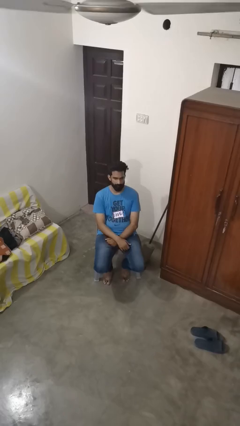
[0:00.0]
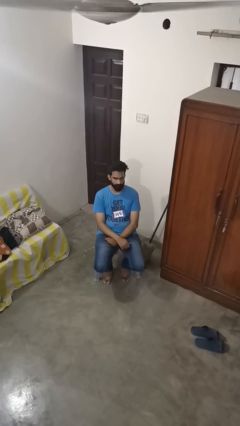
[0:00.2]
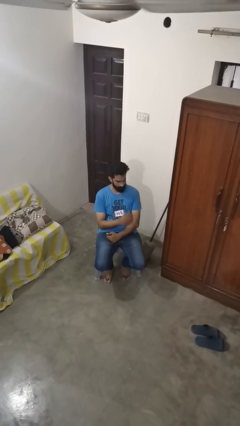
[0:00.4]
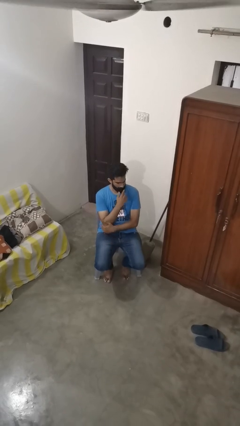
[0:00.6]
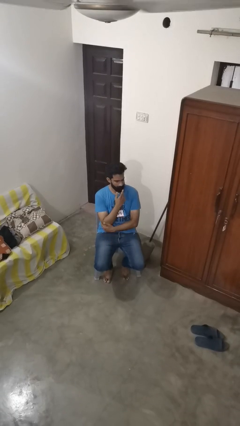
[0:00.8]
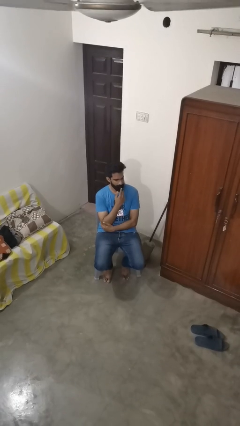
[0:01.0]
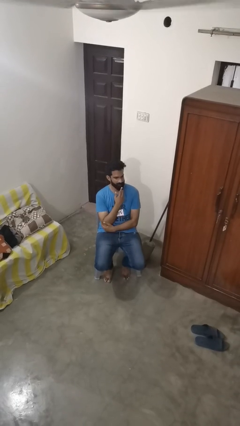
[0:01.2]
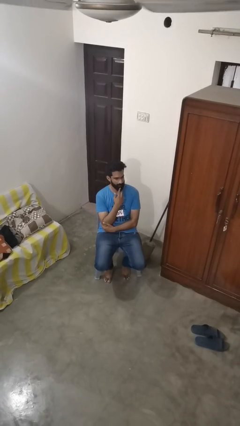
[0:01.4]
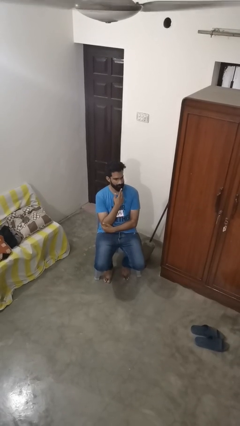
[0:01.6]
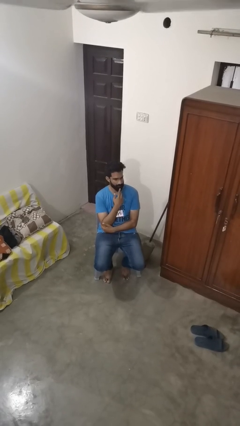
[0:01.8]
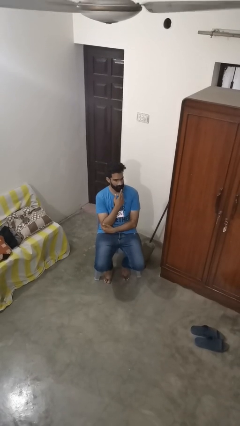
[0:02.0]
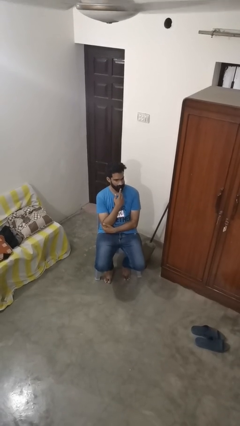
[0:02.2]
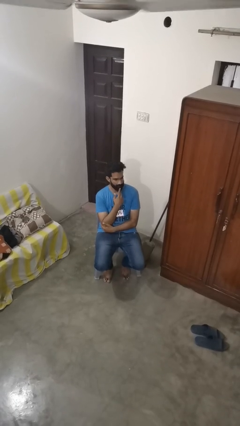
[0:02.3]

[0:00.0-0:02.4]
person strokes chin

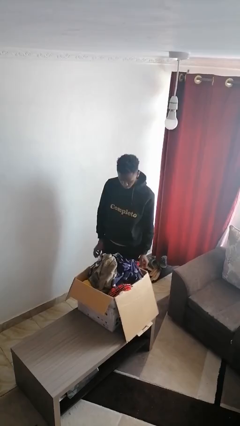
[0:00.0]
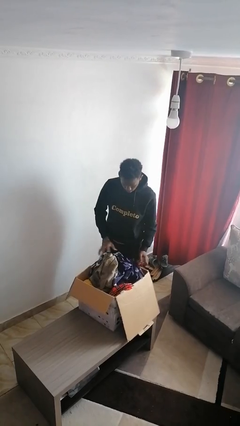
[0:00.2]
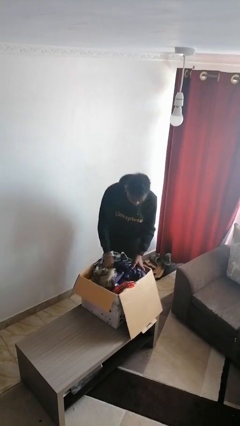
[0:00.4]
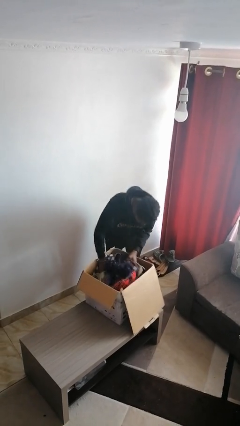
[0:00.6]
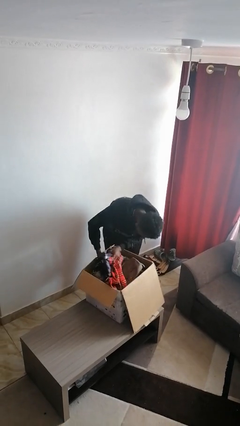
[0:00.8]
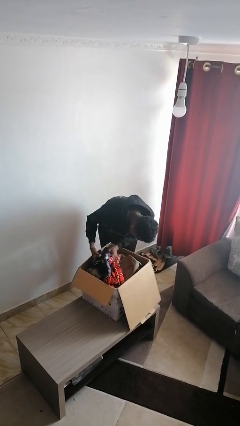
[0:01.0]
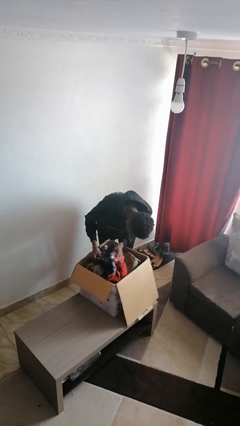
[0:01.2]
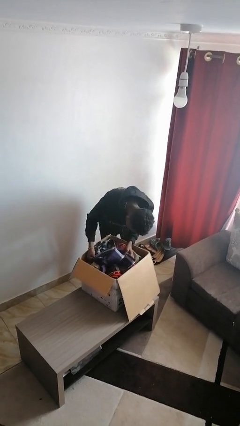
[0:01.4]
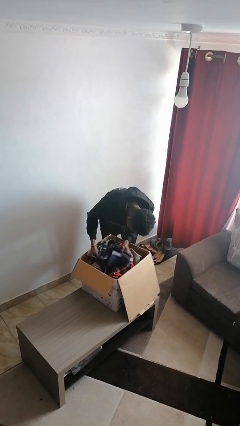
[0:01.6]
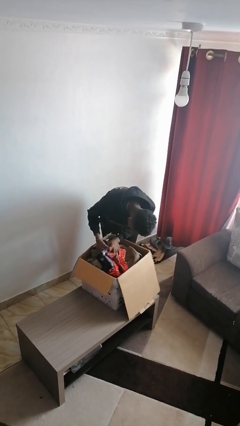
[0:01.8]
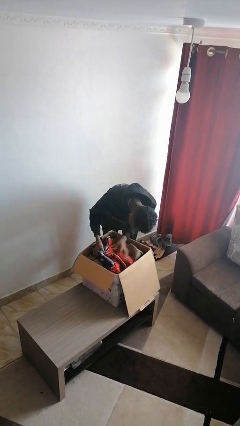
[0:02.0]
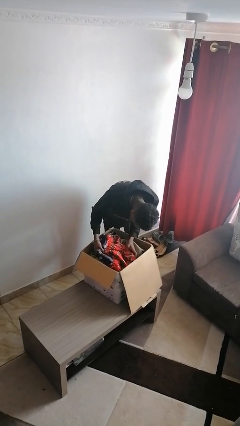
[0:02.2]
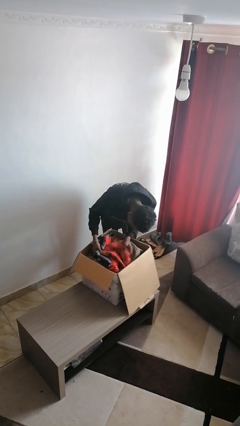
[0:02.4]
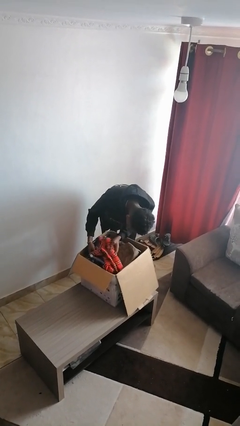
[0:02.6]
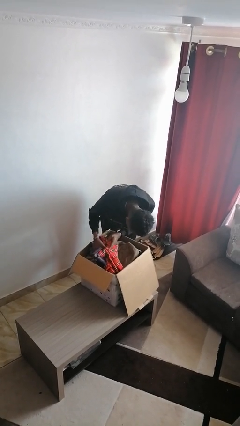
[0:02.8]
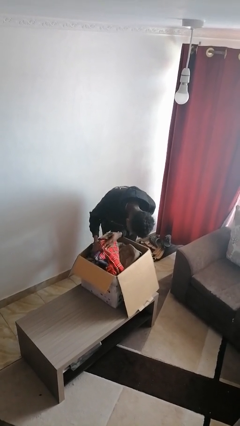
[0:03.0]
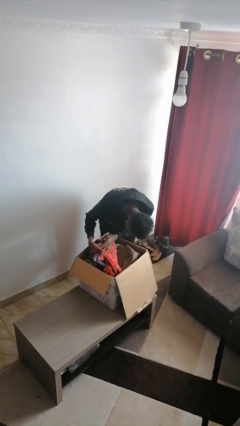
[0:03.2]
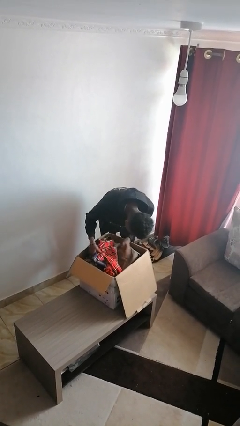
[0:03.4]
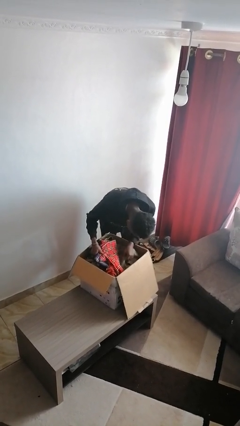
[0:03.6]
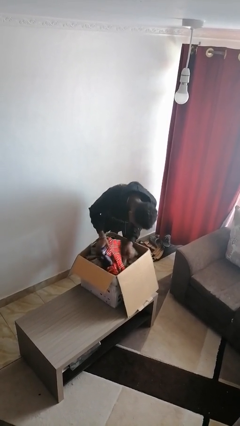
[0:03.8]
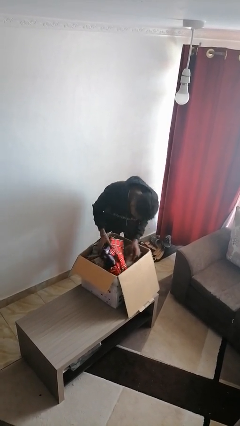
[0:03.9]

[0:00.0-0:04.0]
person searches in box

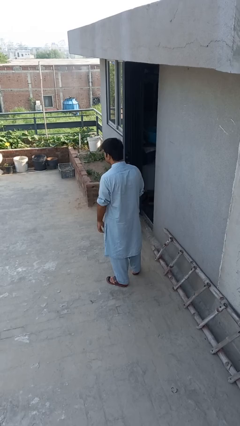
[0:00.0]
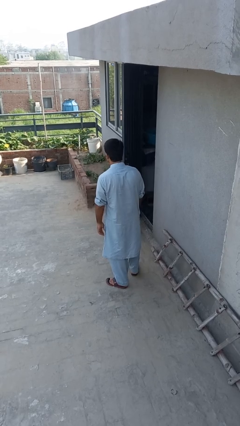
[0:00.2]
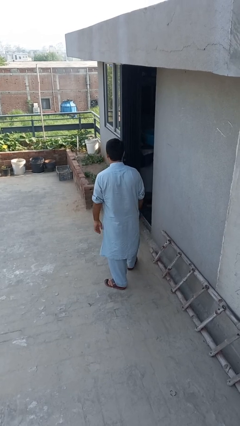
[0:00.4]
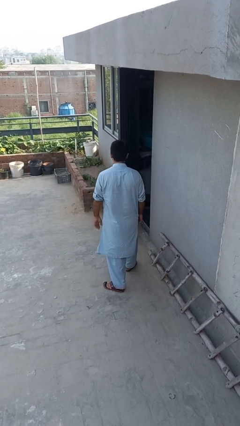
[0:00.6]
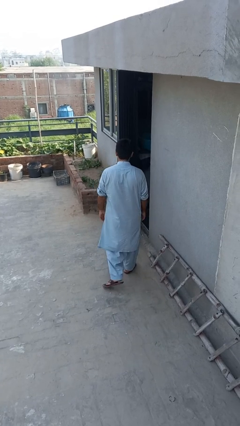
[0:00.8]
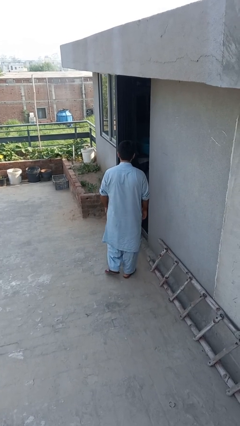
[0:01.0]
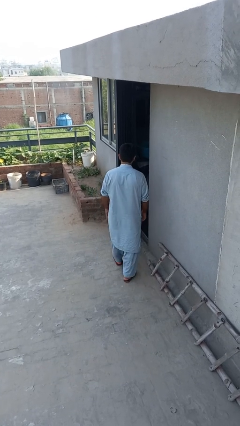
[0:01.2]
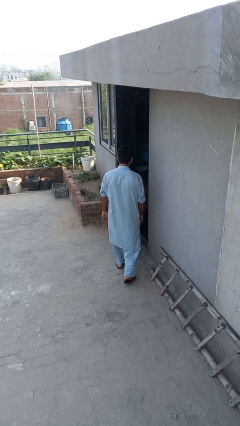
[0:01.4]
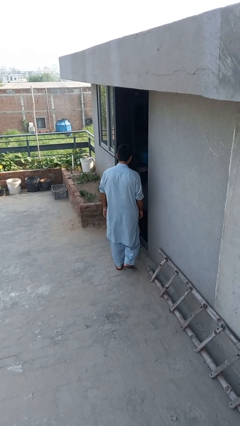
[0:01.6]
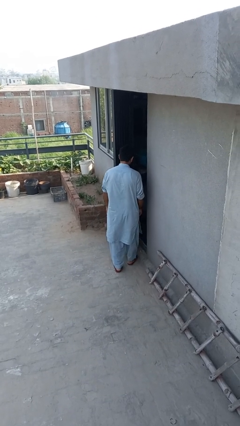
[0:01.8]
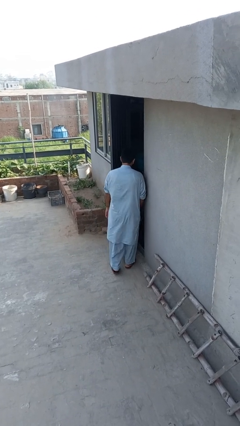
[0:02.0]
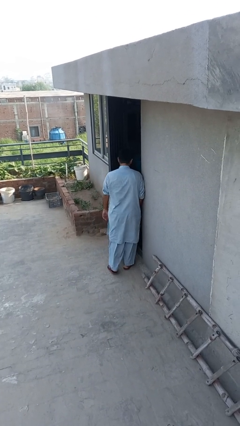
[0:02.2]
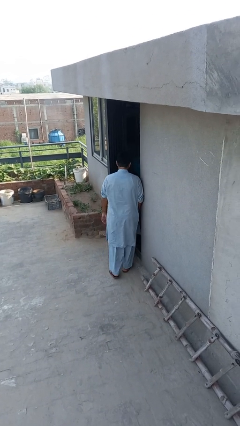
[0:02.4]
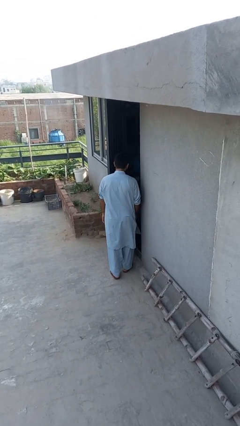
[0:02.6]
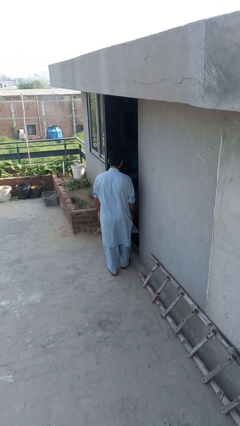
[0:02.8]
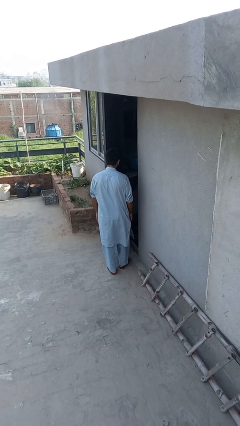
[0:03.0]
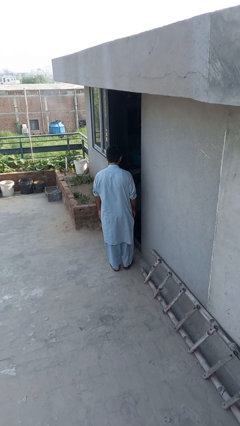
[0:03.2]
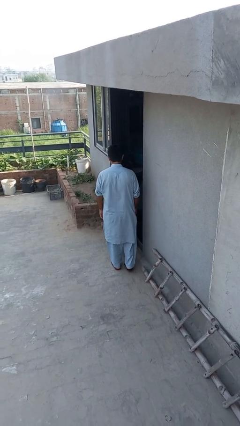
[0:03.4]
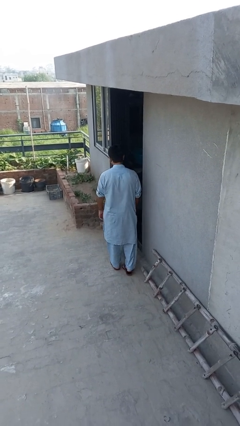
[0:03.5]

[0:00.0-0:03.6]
person bumps into wall

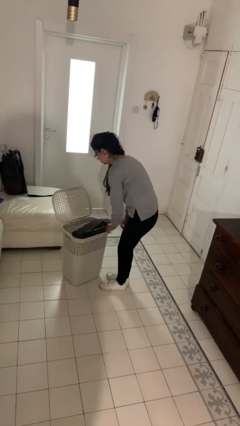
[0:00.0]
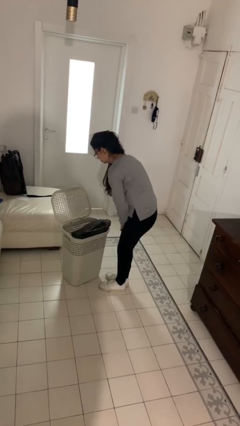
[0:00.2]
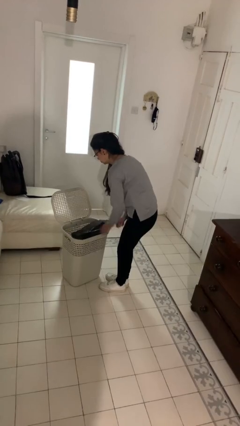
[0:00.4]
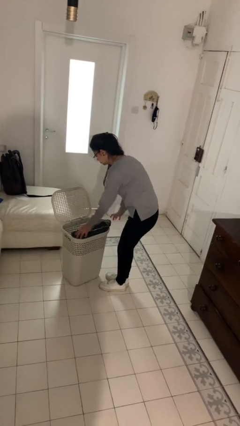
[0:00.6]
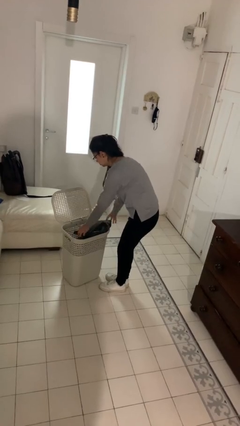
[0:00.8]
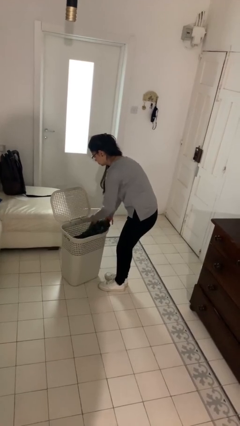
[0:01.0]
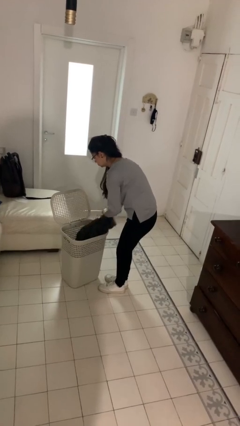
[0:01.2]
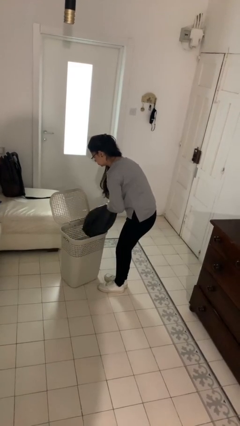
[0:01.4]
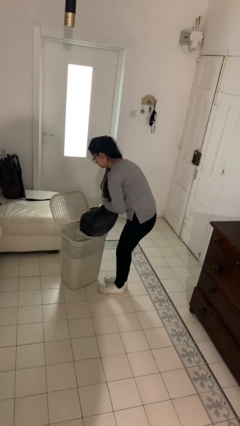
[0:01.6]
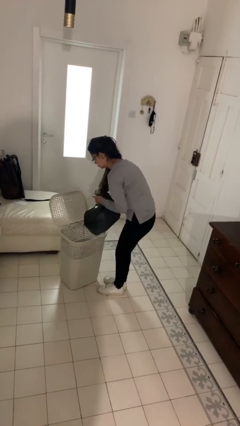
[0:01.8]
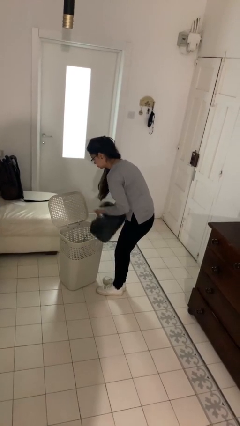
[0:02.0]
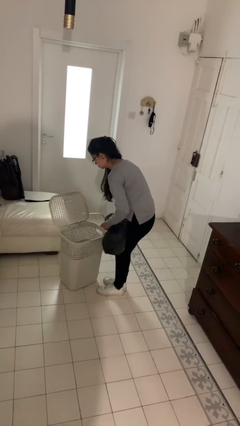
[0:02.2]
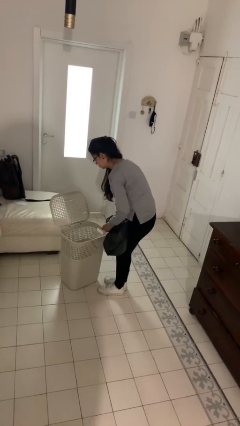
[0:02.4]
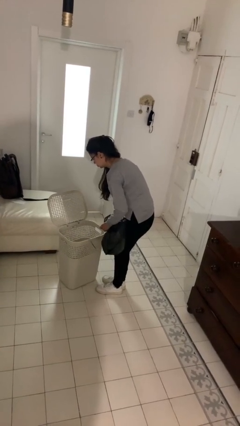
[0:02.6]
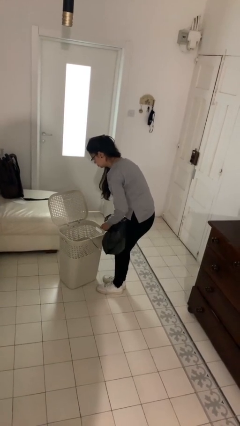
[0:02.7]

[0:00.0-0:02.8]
person removes trashbag from trashcan

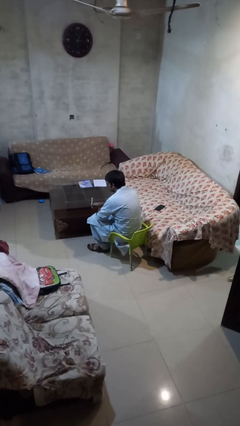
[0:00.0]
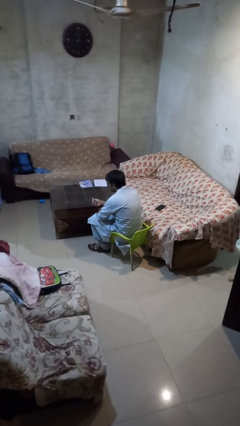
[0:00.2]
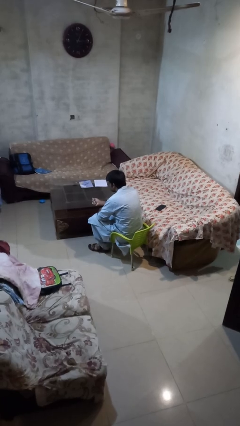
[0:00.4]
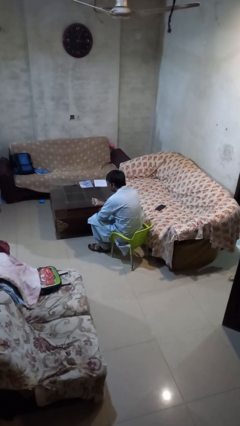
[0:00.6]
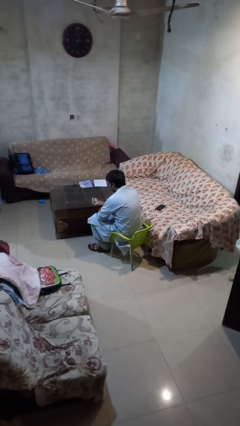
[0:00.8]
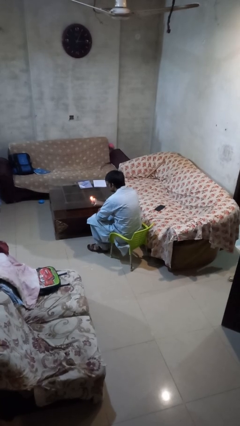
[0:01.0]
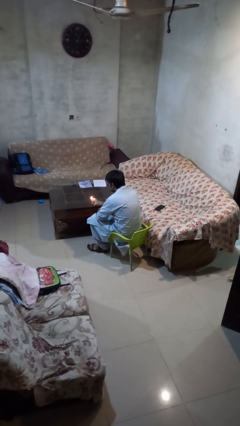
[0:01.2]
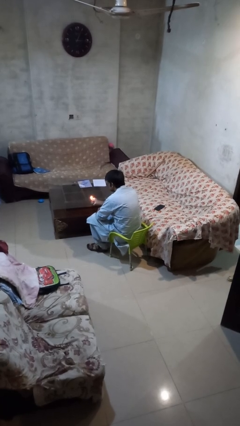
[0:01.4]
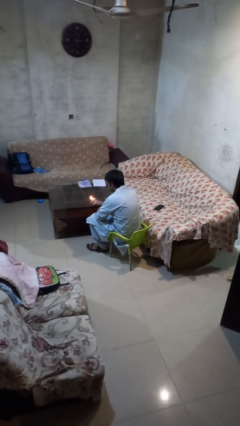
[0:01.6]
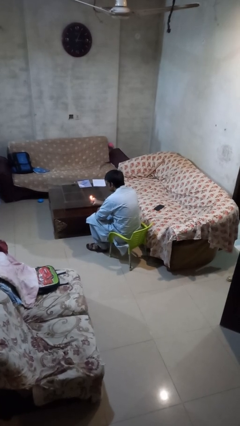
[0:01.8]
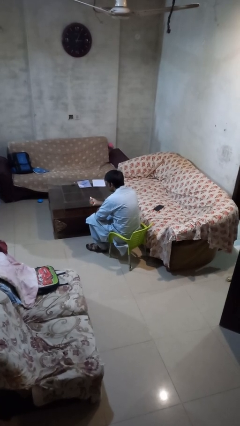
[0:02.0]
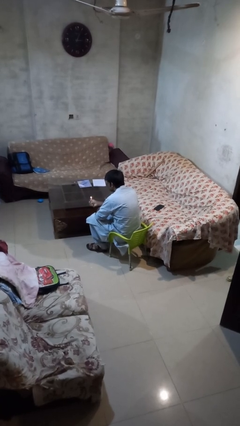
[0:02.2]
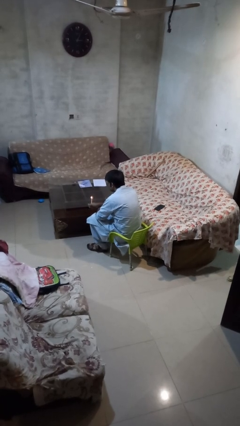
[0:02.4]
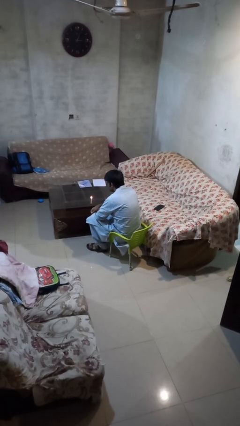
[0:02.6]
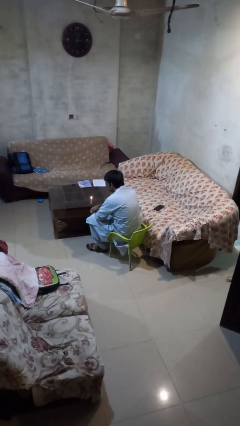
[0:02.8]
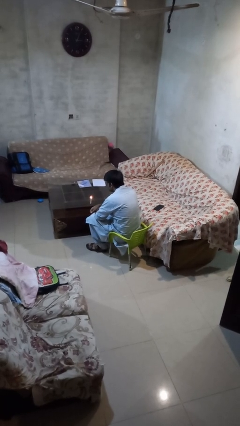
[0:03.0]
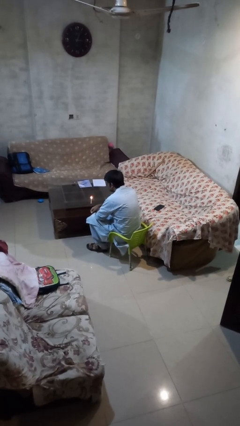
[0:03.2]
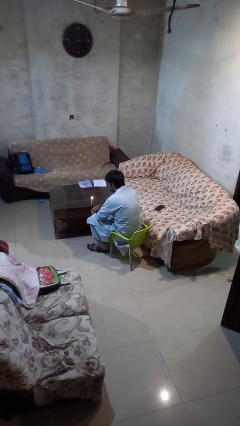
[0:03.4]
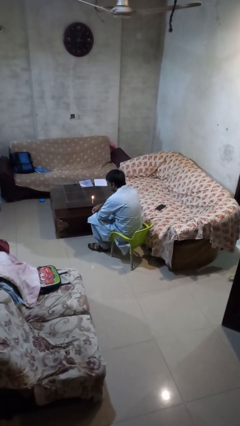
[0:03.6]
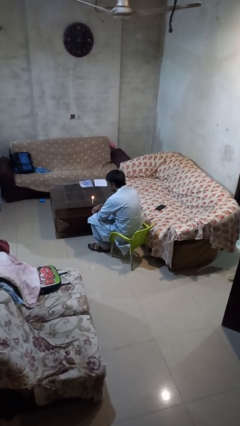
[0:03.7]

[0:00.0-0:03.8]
person lights candle

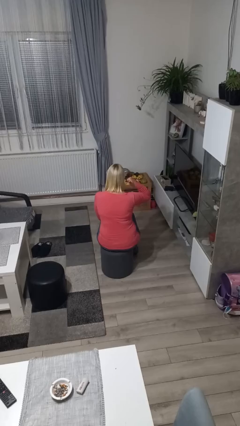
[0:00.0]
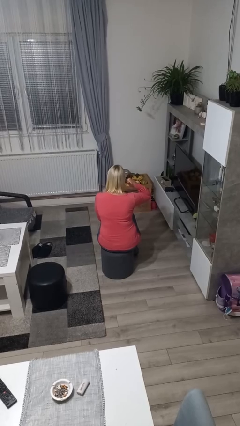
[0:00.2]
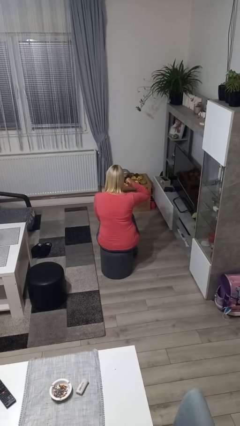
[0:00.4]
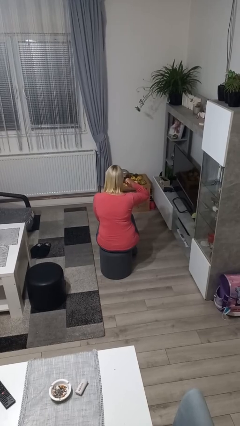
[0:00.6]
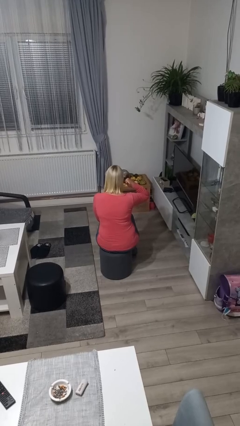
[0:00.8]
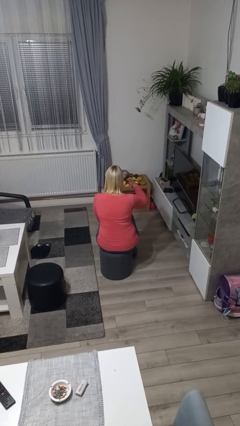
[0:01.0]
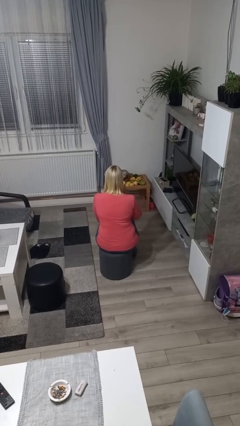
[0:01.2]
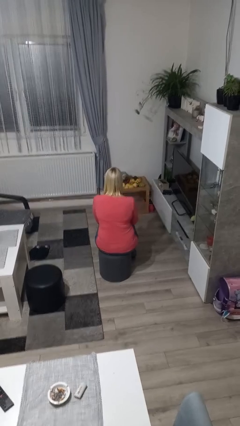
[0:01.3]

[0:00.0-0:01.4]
person gestures call me
